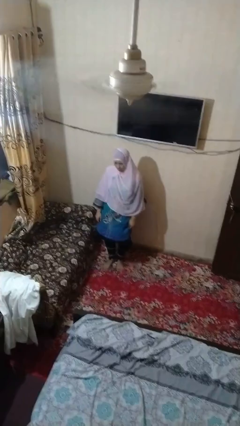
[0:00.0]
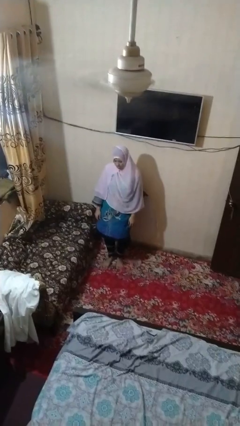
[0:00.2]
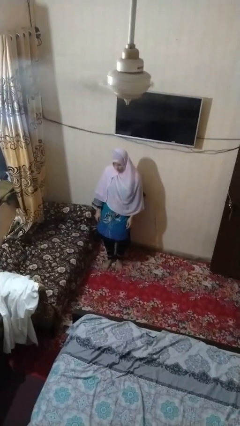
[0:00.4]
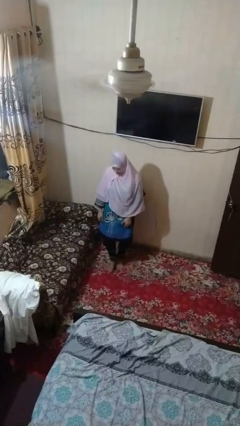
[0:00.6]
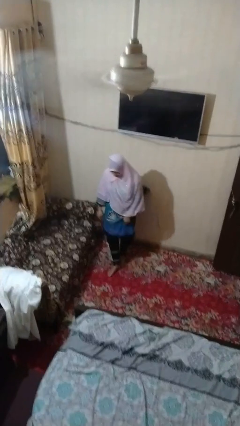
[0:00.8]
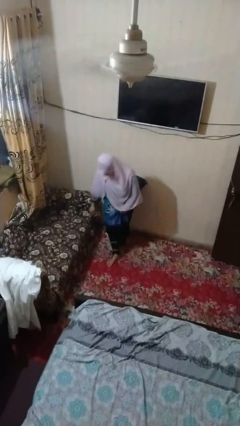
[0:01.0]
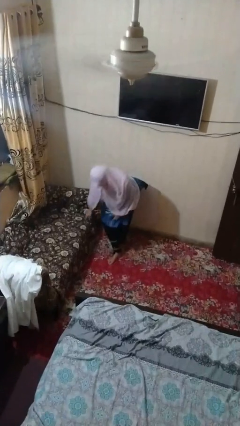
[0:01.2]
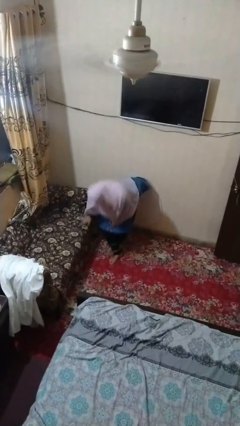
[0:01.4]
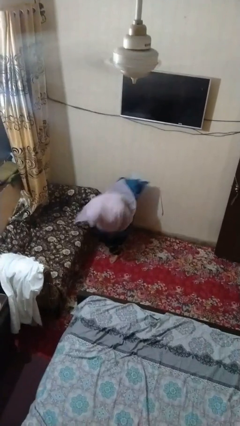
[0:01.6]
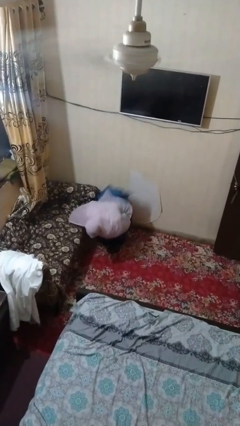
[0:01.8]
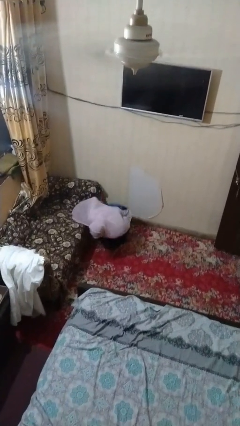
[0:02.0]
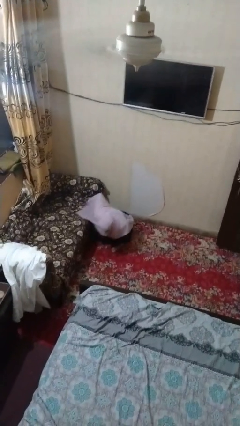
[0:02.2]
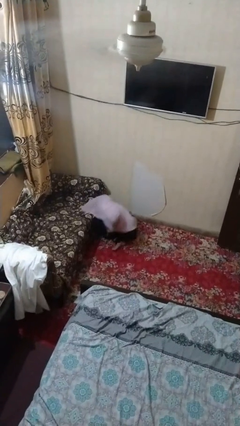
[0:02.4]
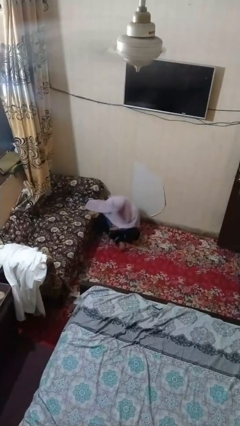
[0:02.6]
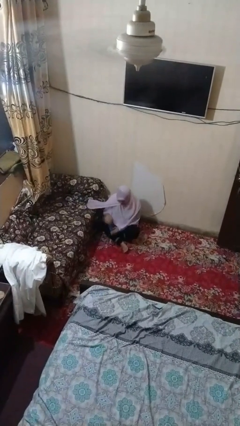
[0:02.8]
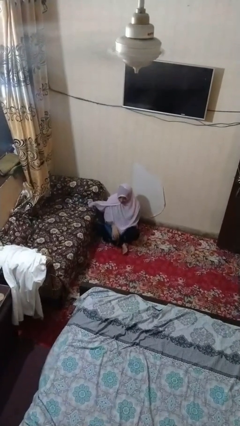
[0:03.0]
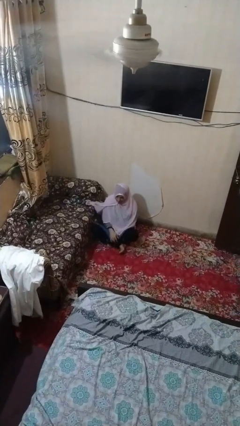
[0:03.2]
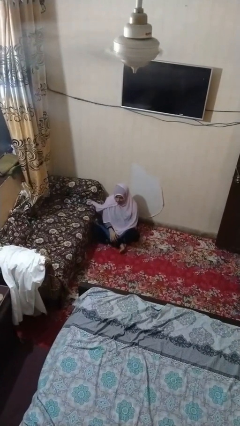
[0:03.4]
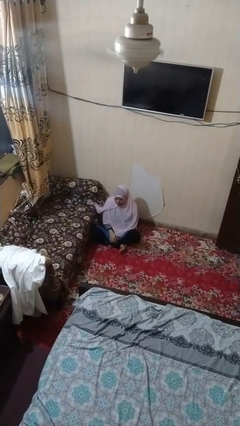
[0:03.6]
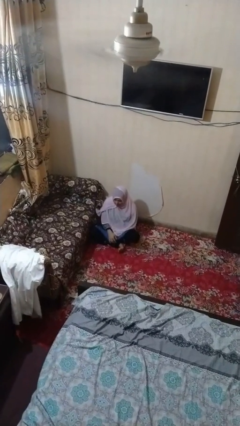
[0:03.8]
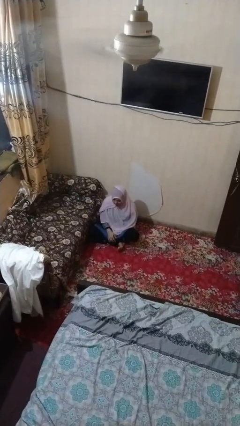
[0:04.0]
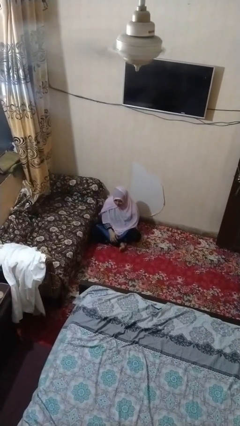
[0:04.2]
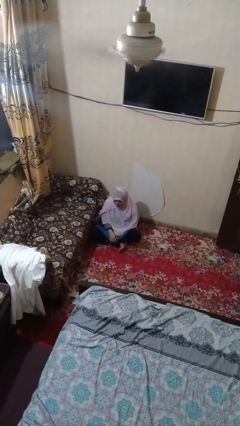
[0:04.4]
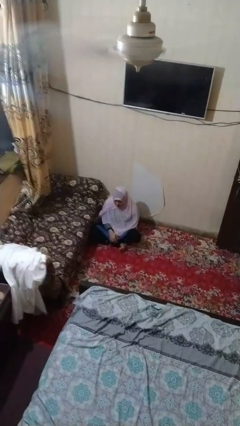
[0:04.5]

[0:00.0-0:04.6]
person sits crisscross

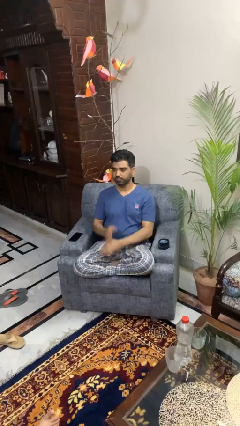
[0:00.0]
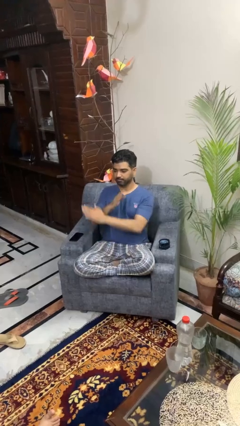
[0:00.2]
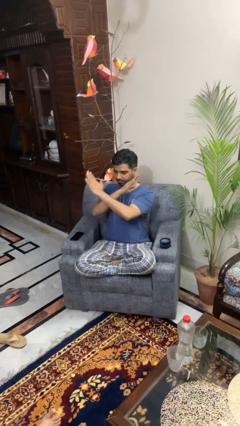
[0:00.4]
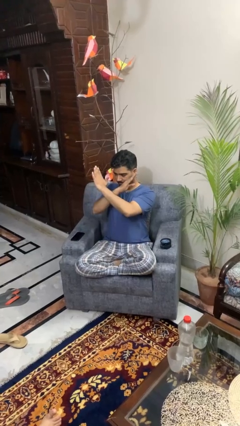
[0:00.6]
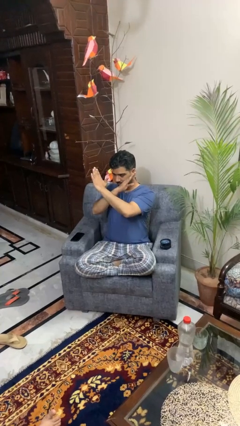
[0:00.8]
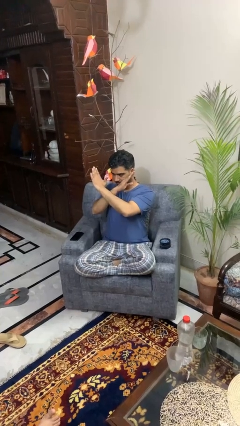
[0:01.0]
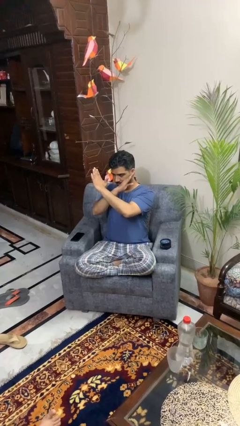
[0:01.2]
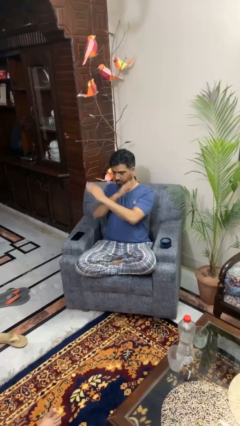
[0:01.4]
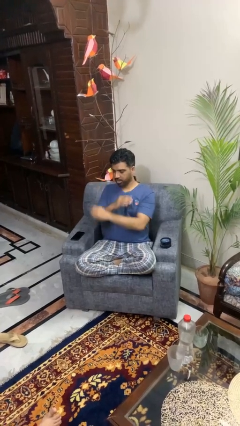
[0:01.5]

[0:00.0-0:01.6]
person gestures arms x

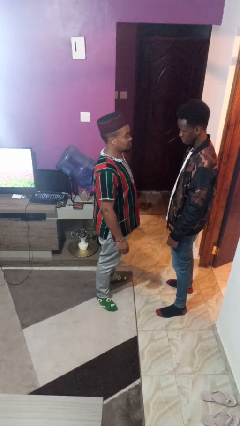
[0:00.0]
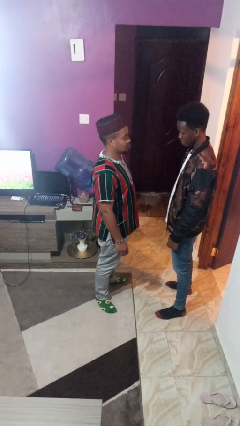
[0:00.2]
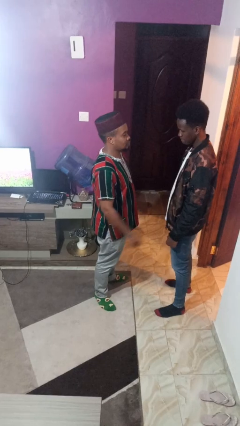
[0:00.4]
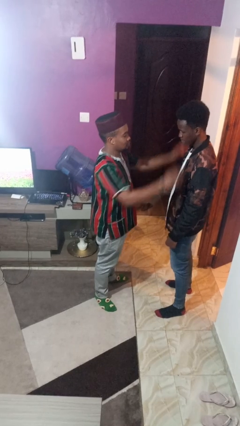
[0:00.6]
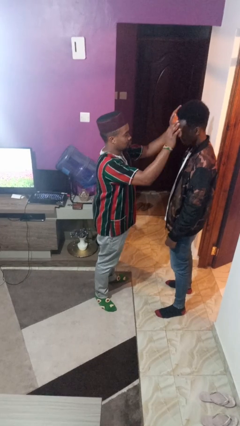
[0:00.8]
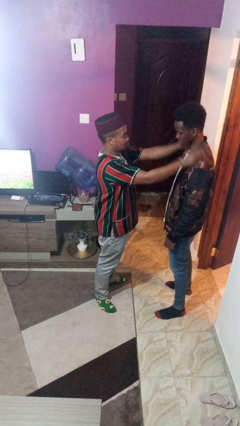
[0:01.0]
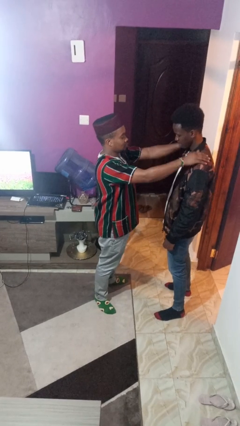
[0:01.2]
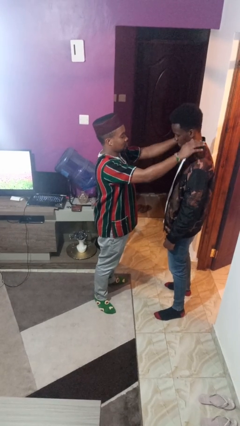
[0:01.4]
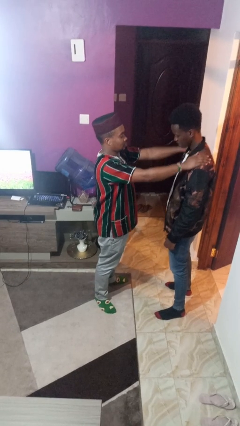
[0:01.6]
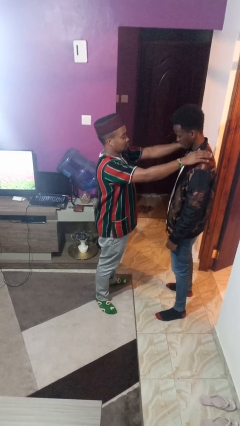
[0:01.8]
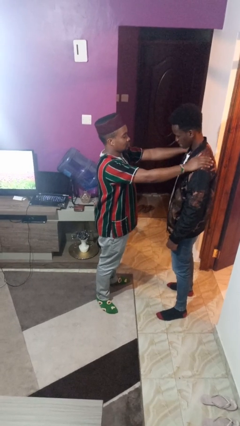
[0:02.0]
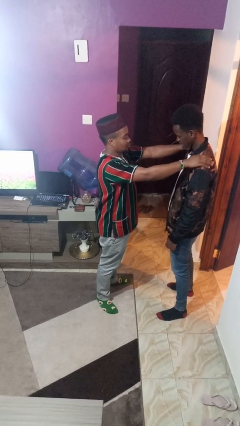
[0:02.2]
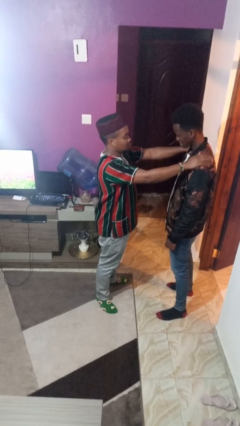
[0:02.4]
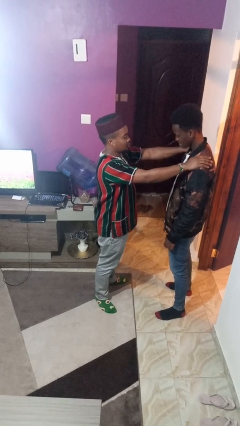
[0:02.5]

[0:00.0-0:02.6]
person opens facility door

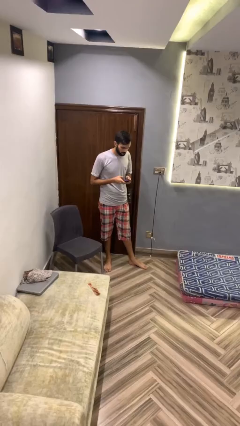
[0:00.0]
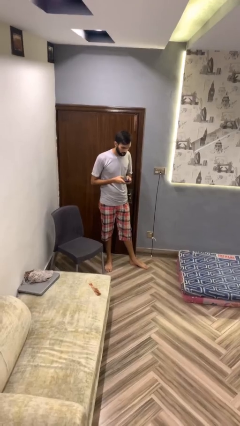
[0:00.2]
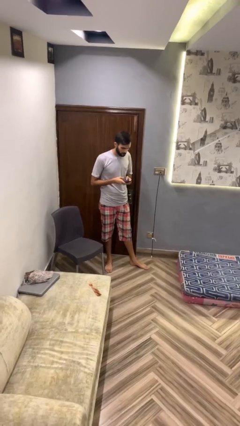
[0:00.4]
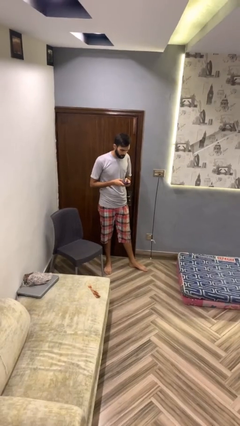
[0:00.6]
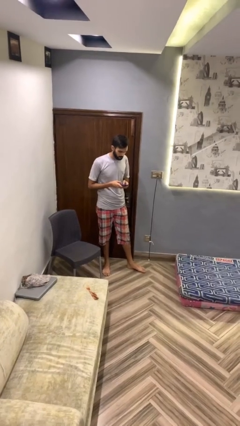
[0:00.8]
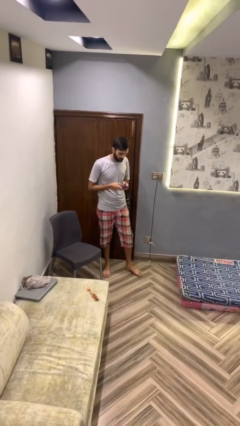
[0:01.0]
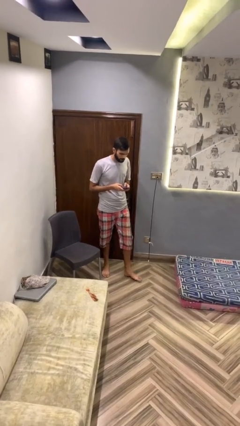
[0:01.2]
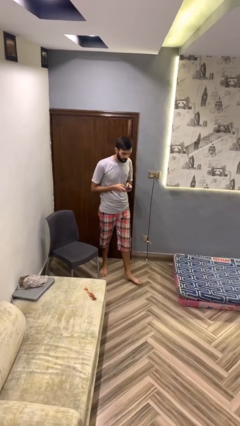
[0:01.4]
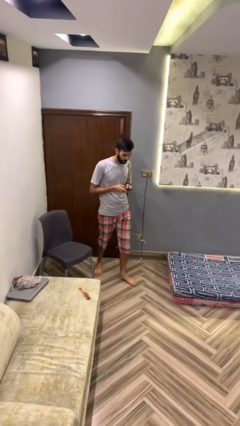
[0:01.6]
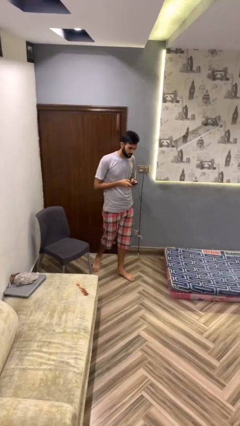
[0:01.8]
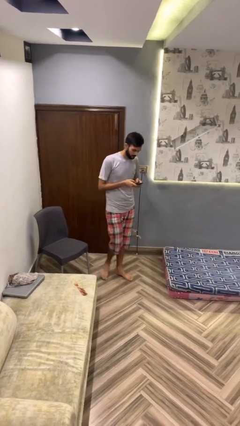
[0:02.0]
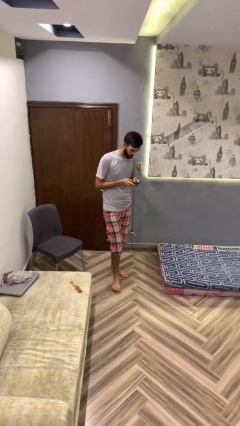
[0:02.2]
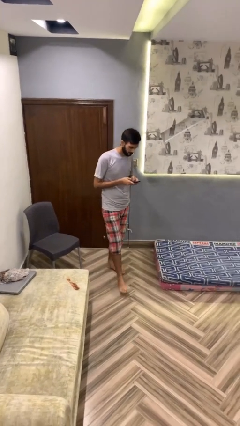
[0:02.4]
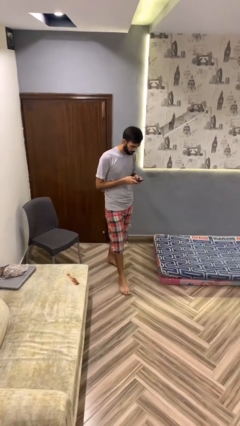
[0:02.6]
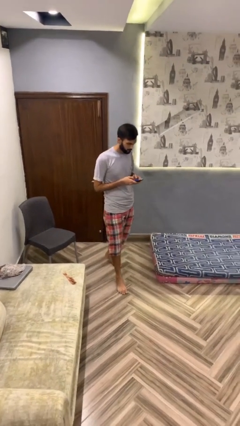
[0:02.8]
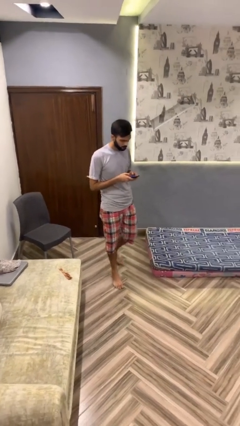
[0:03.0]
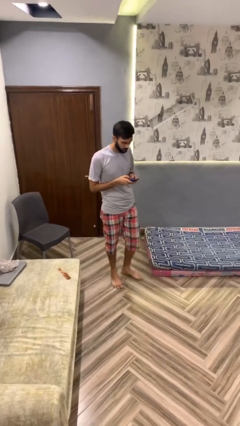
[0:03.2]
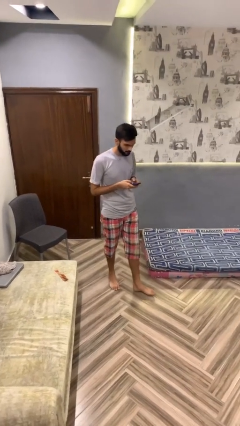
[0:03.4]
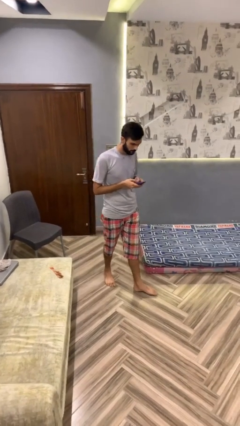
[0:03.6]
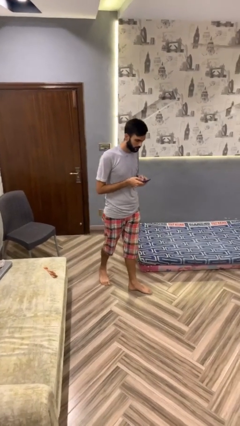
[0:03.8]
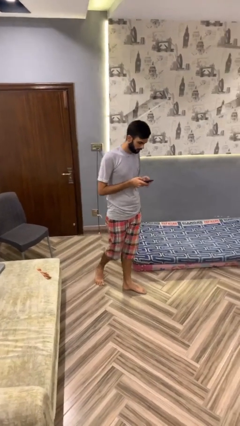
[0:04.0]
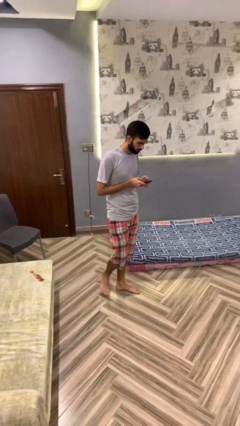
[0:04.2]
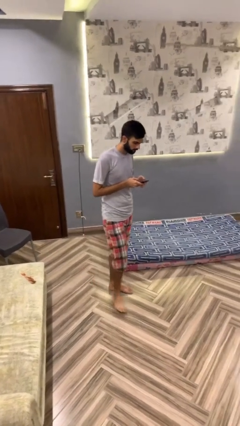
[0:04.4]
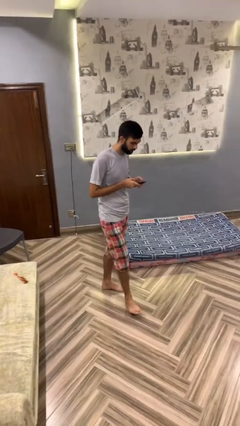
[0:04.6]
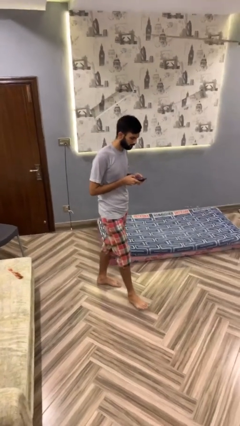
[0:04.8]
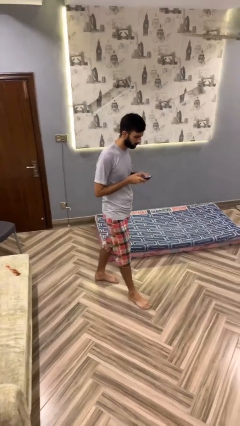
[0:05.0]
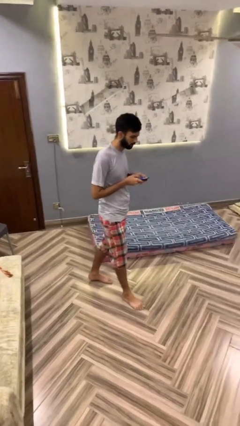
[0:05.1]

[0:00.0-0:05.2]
person texts on phone

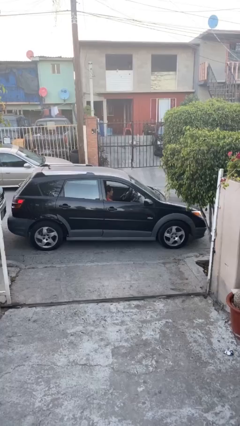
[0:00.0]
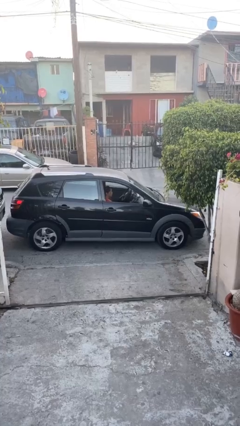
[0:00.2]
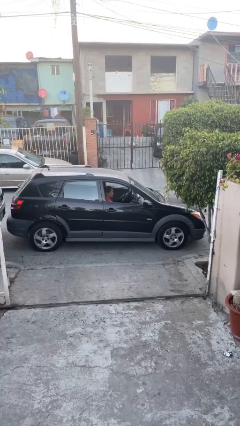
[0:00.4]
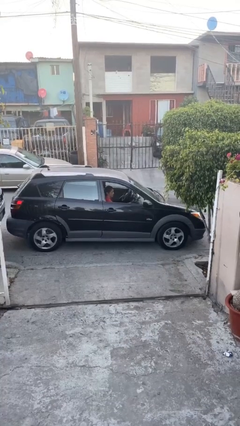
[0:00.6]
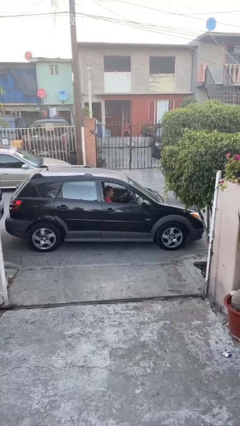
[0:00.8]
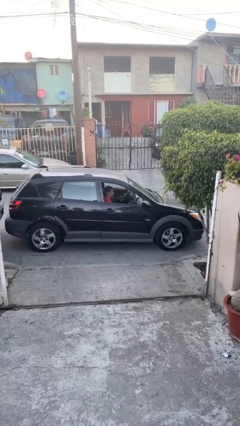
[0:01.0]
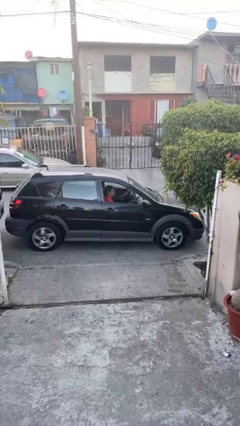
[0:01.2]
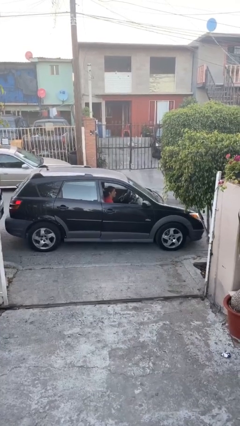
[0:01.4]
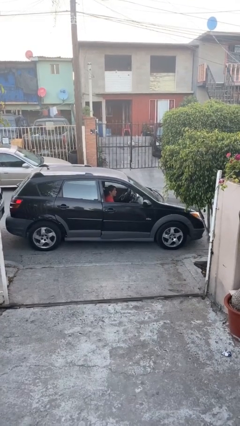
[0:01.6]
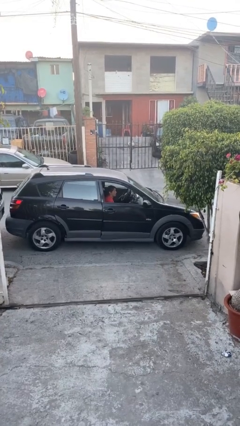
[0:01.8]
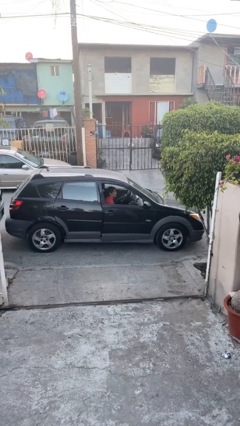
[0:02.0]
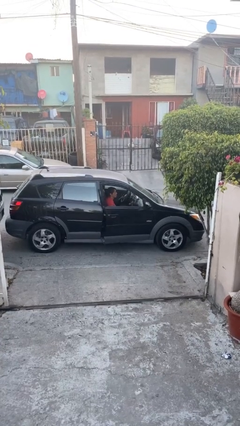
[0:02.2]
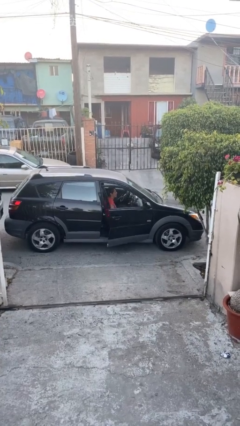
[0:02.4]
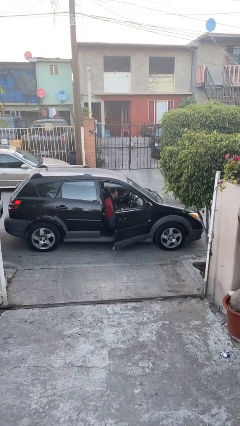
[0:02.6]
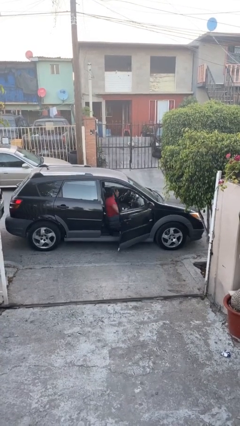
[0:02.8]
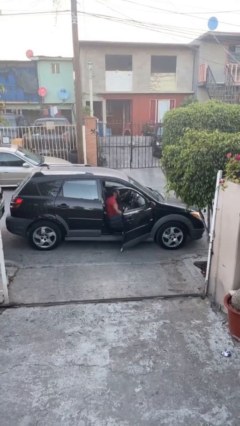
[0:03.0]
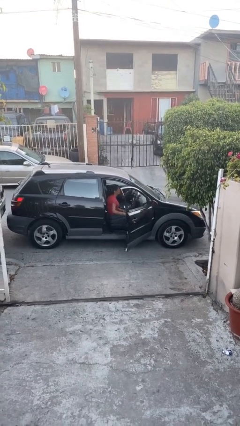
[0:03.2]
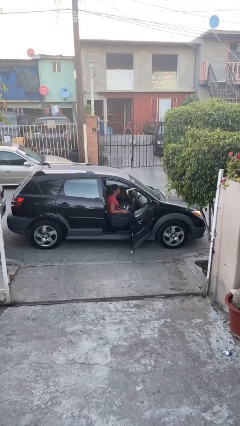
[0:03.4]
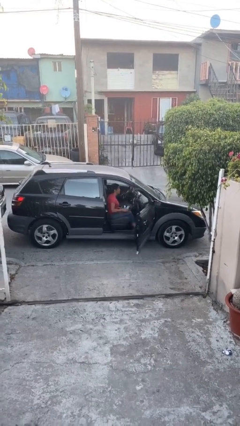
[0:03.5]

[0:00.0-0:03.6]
person opens car door
